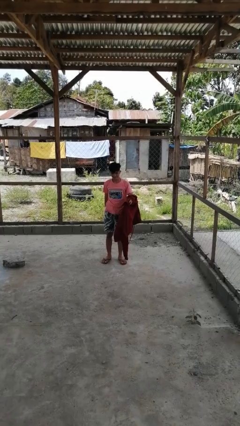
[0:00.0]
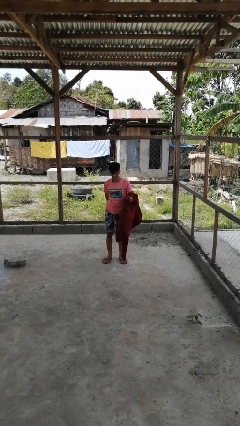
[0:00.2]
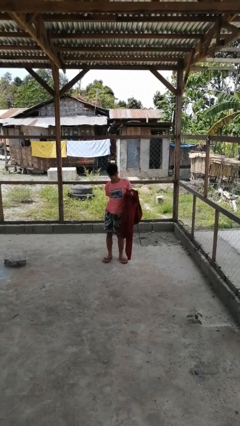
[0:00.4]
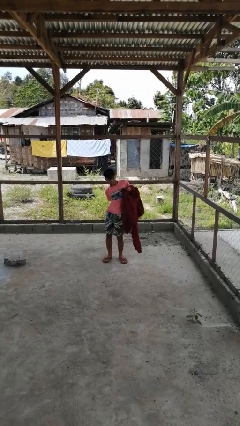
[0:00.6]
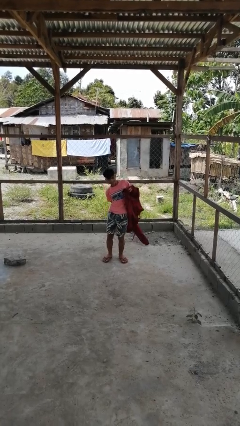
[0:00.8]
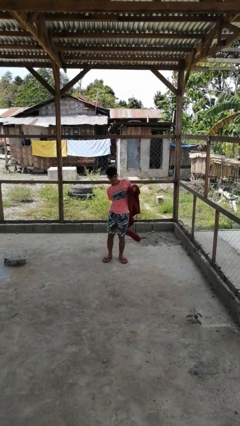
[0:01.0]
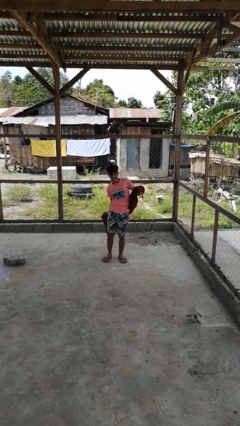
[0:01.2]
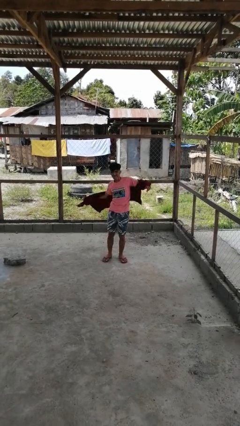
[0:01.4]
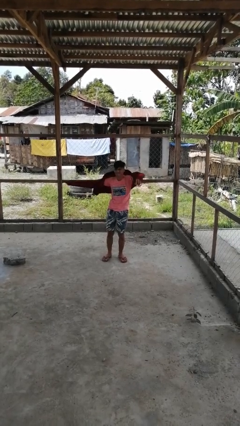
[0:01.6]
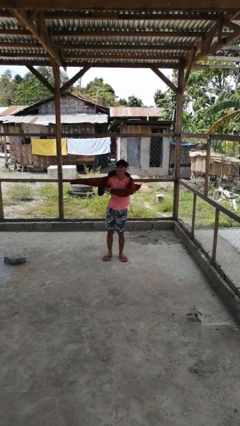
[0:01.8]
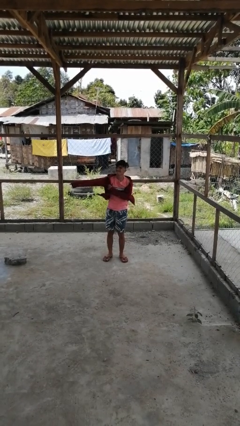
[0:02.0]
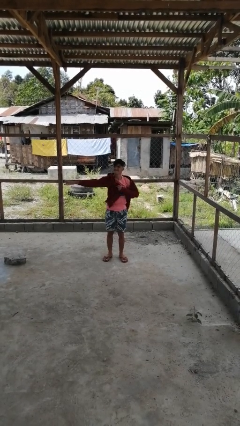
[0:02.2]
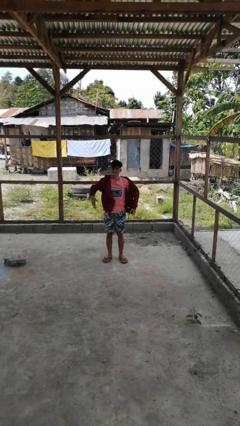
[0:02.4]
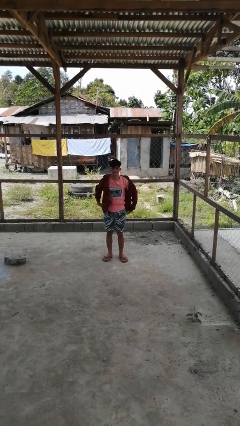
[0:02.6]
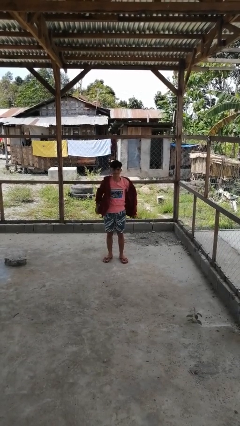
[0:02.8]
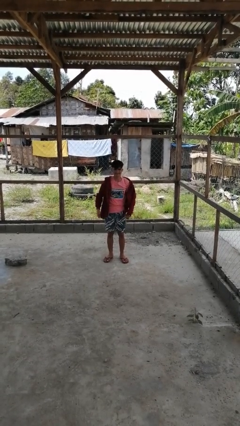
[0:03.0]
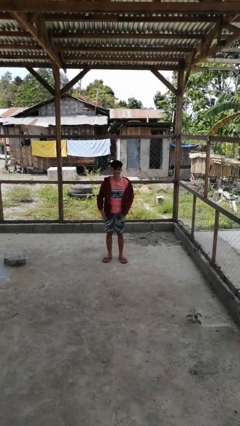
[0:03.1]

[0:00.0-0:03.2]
person puts on jacket

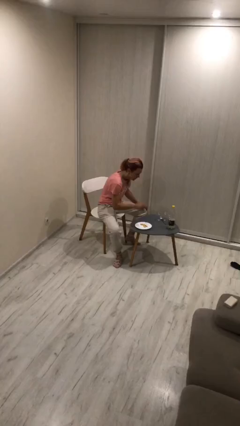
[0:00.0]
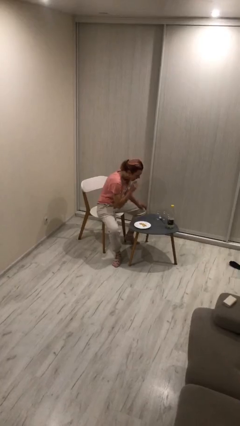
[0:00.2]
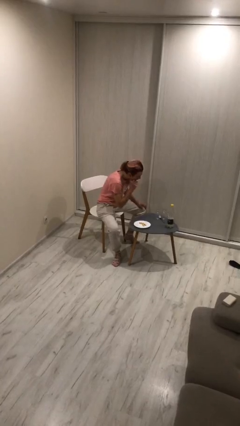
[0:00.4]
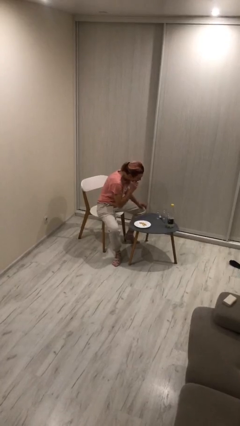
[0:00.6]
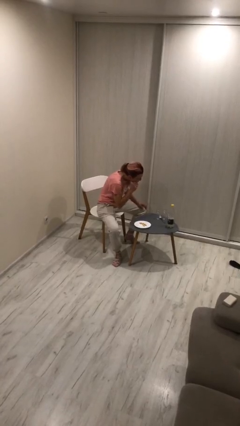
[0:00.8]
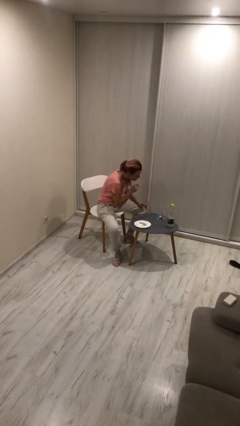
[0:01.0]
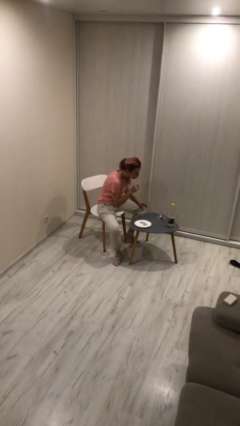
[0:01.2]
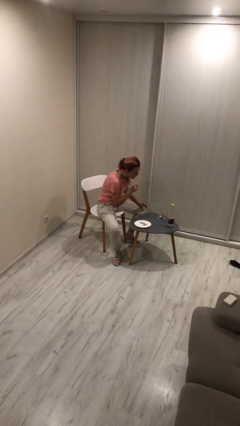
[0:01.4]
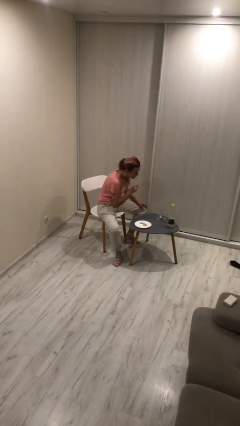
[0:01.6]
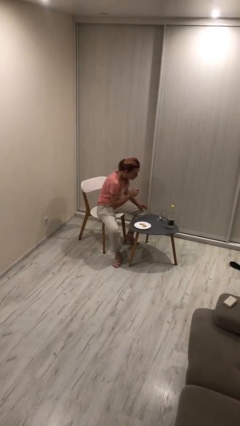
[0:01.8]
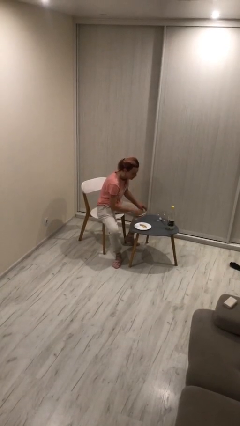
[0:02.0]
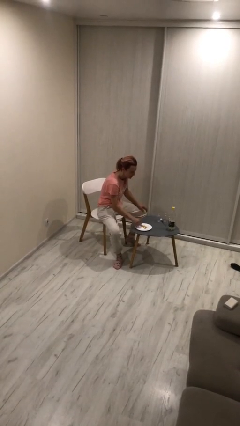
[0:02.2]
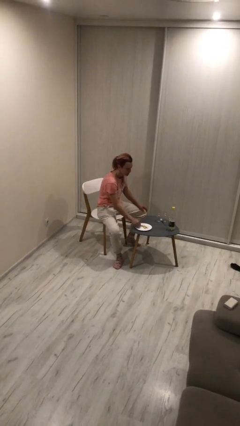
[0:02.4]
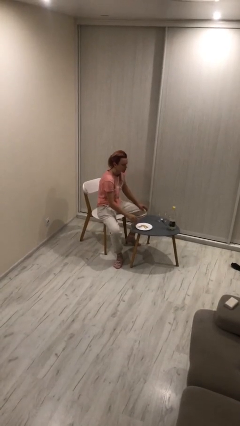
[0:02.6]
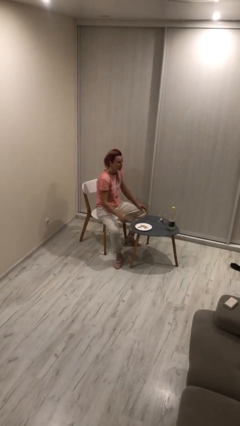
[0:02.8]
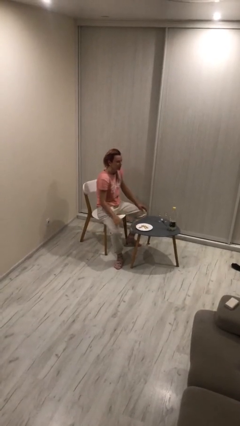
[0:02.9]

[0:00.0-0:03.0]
person eats with hands

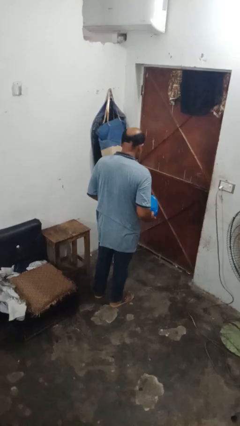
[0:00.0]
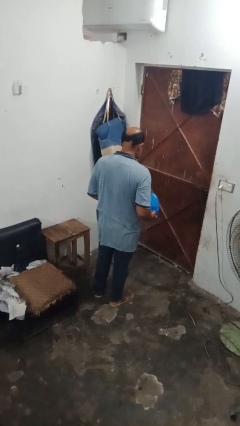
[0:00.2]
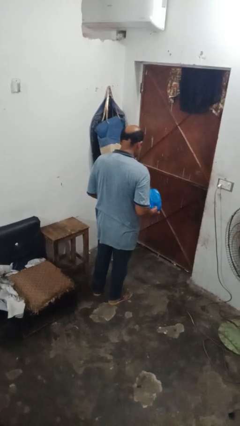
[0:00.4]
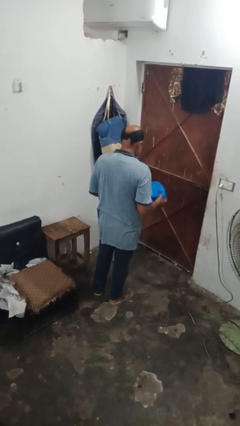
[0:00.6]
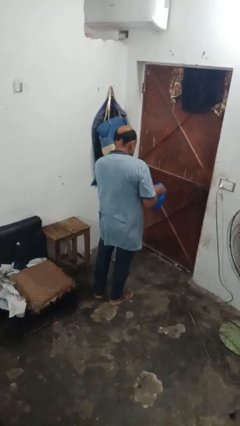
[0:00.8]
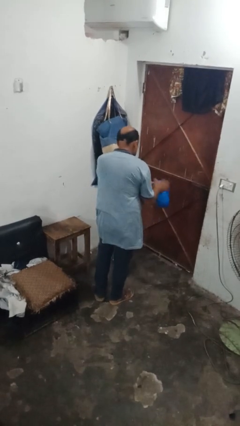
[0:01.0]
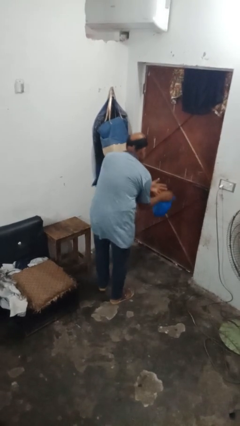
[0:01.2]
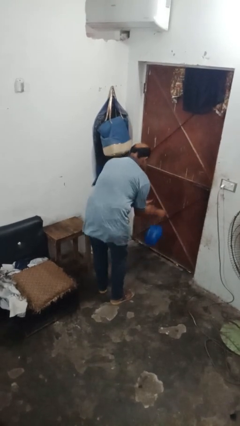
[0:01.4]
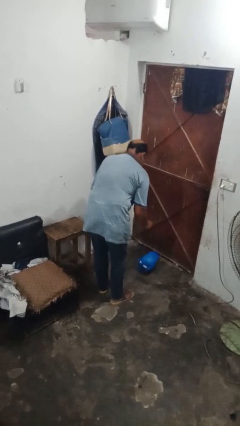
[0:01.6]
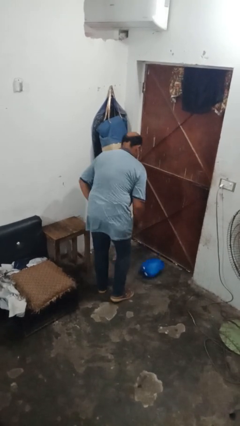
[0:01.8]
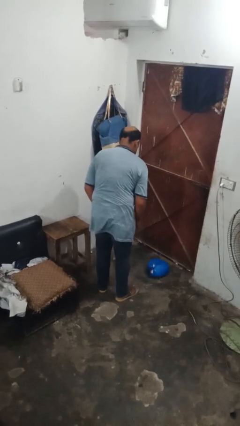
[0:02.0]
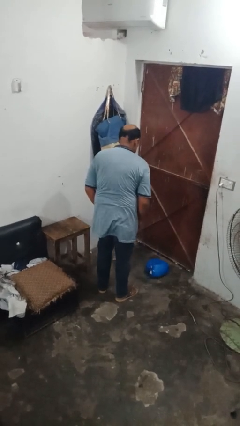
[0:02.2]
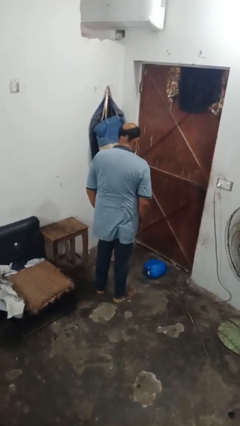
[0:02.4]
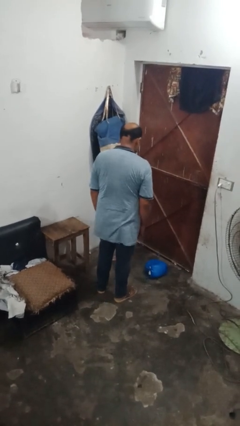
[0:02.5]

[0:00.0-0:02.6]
person drops object

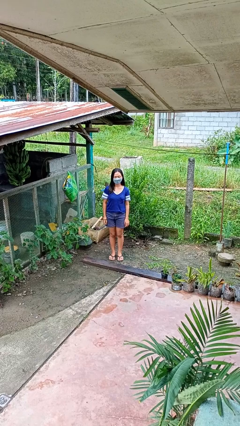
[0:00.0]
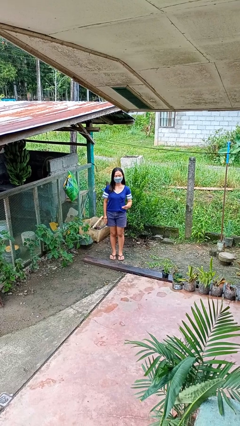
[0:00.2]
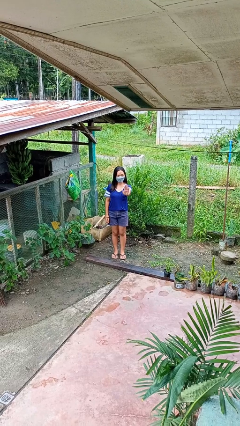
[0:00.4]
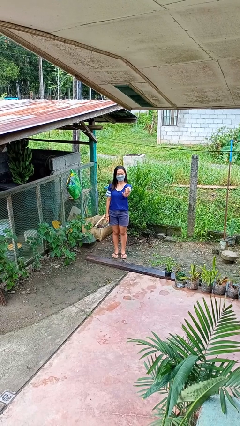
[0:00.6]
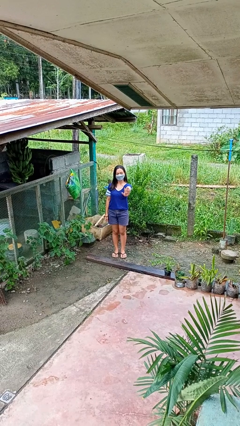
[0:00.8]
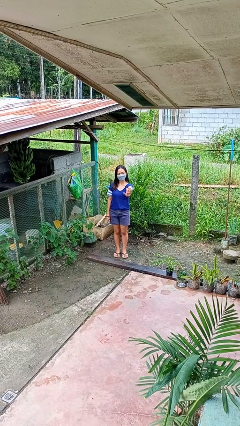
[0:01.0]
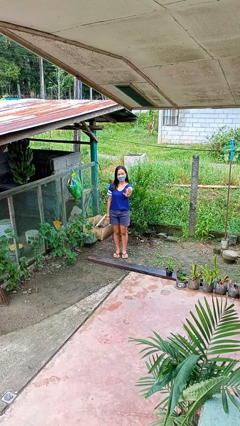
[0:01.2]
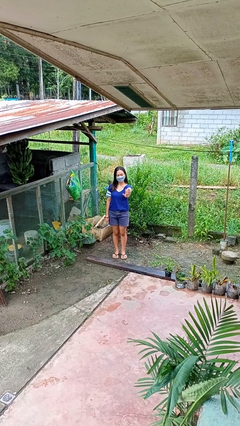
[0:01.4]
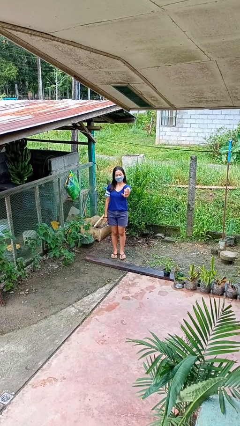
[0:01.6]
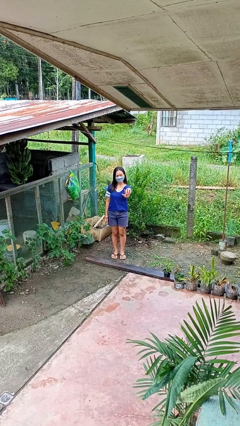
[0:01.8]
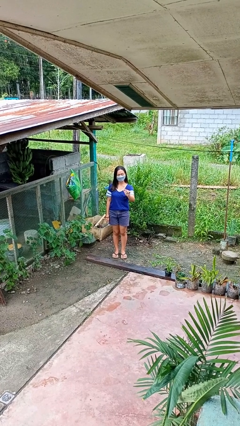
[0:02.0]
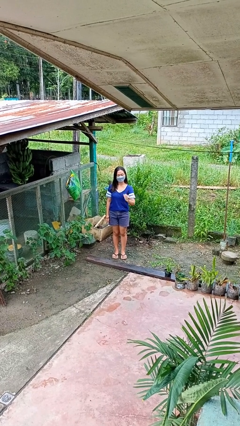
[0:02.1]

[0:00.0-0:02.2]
person gestures stop

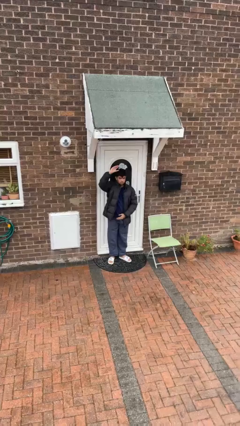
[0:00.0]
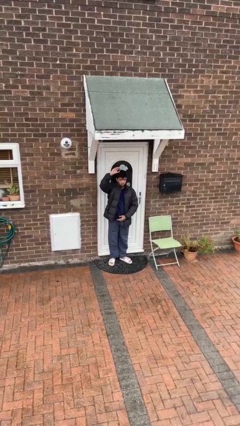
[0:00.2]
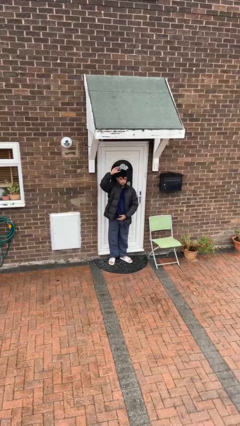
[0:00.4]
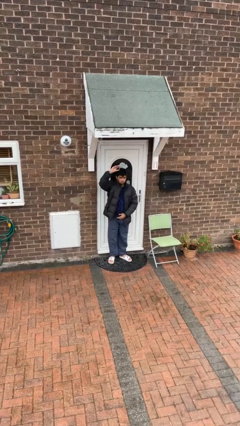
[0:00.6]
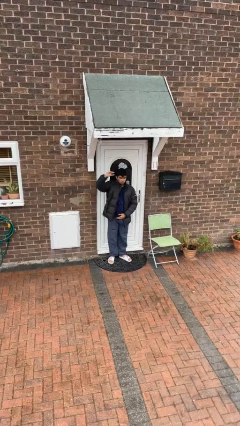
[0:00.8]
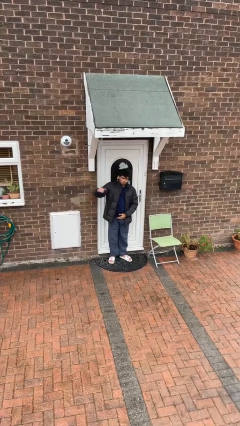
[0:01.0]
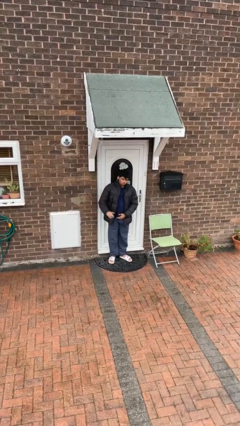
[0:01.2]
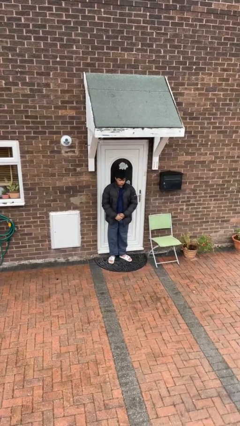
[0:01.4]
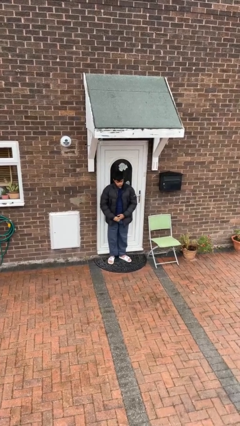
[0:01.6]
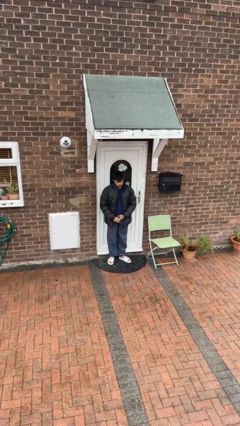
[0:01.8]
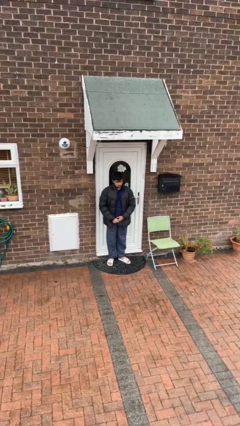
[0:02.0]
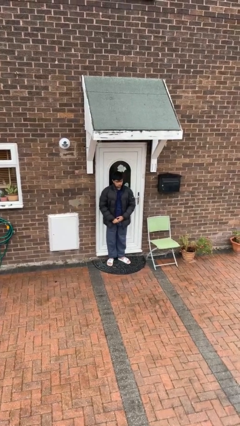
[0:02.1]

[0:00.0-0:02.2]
person gestures lower hand

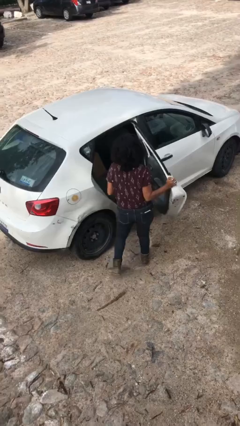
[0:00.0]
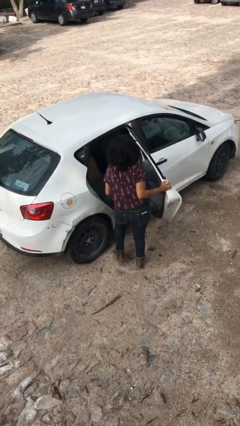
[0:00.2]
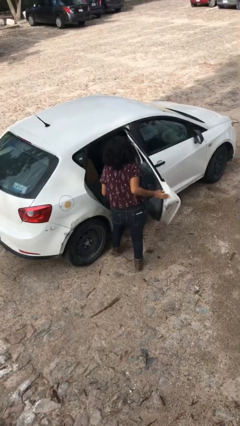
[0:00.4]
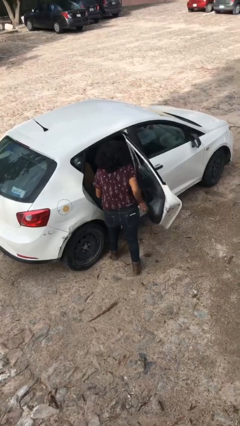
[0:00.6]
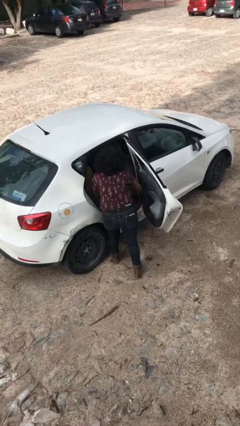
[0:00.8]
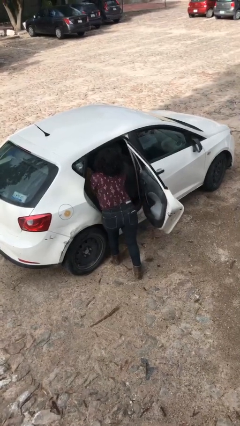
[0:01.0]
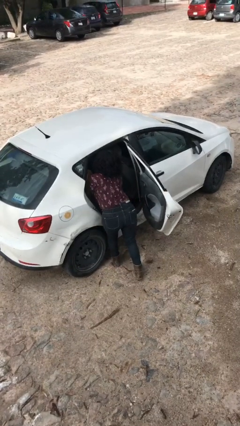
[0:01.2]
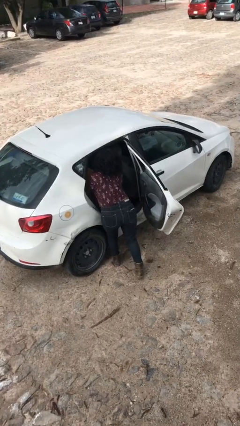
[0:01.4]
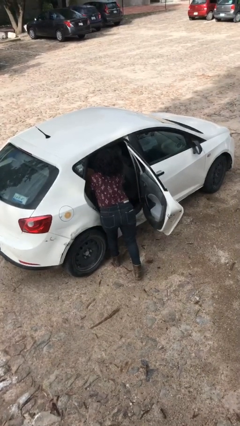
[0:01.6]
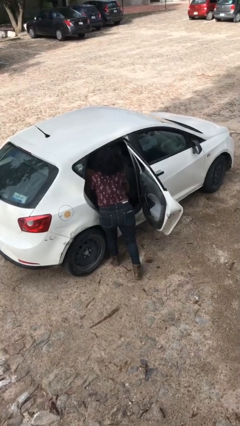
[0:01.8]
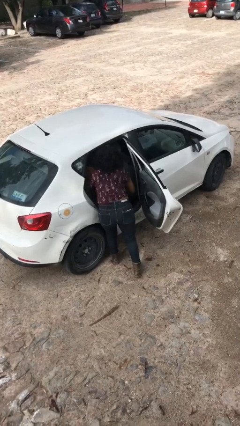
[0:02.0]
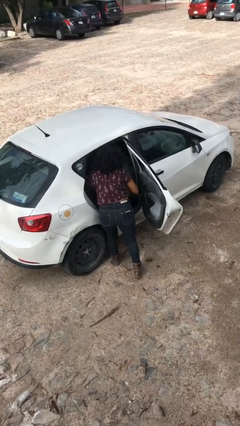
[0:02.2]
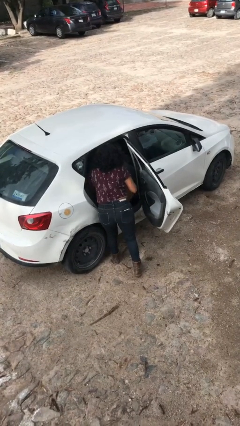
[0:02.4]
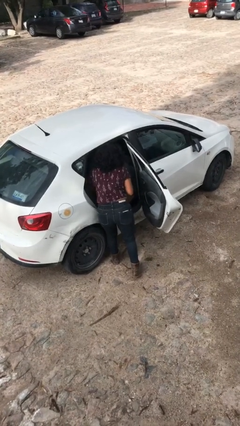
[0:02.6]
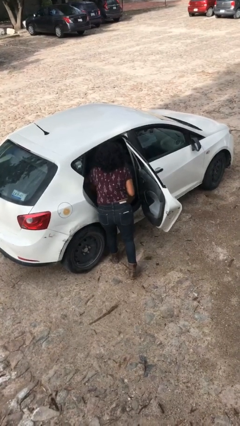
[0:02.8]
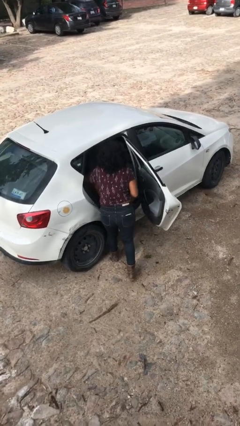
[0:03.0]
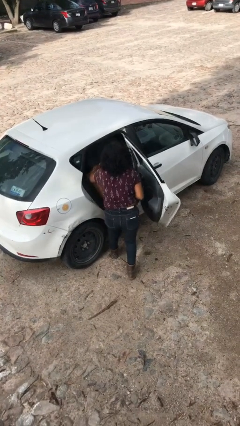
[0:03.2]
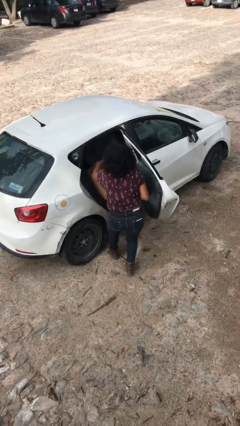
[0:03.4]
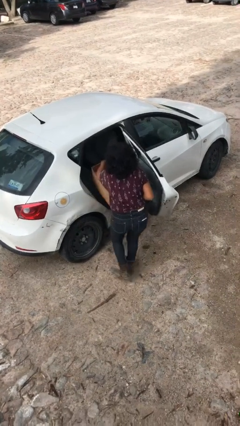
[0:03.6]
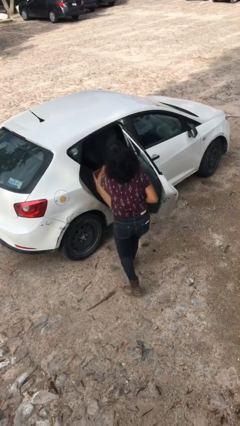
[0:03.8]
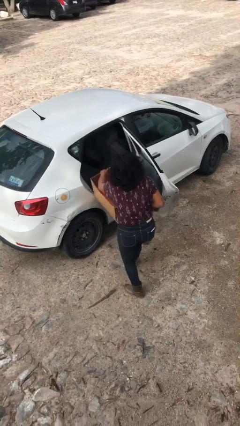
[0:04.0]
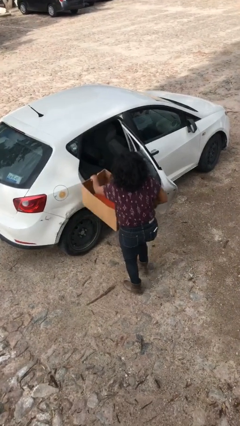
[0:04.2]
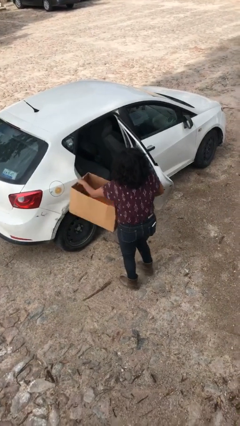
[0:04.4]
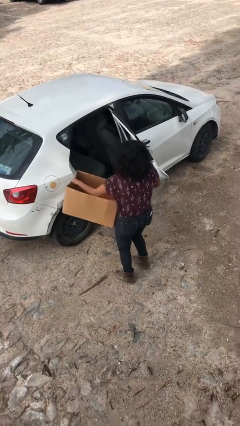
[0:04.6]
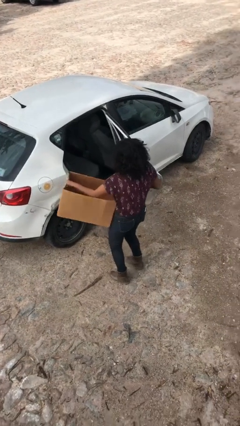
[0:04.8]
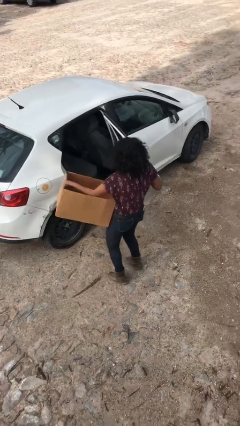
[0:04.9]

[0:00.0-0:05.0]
person unloads car
